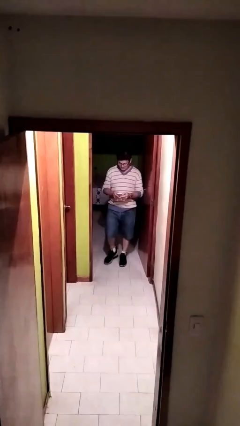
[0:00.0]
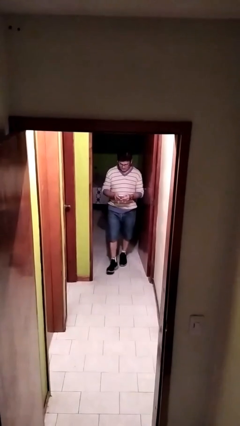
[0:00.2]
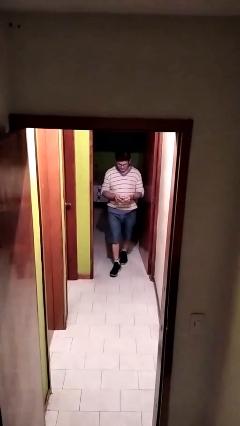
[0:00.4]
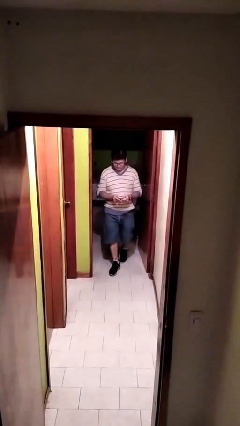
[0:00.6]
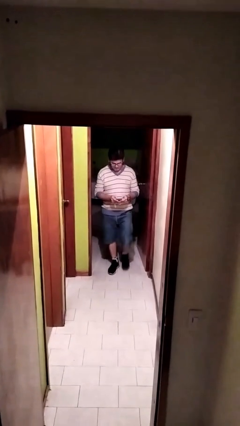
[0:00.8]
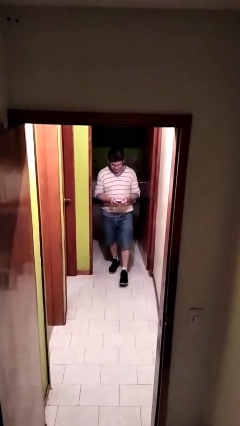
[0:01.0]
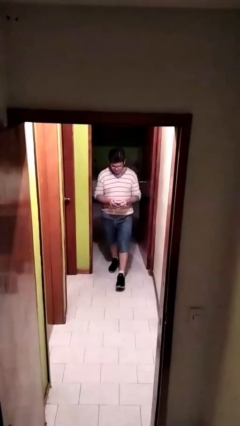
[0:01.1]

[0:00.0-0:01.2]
person enters scene through structure

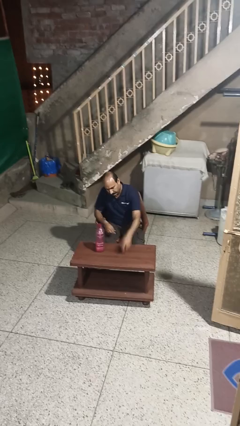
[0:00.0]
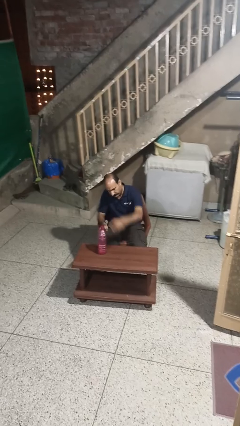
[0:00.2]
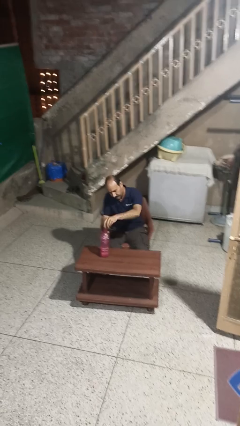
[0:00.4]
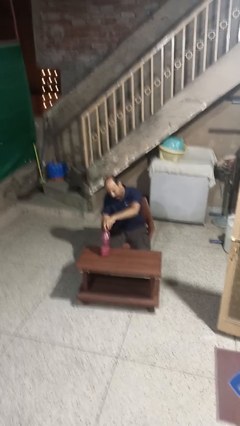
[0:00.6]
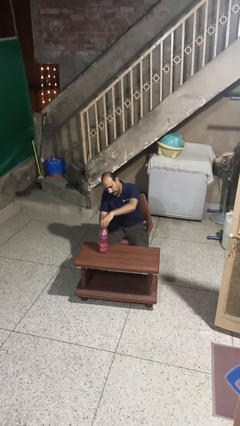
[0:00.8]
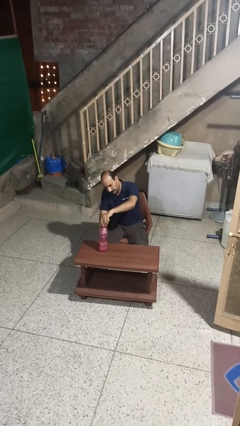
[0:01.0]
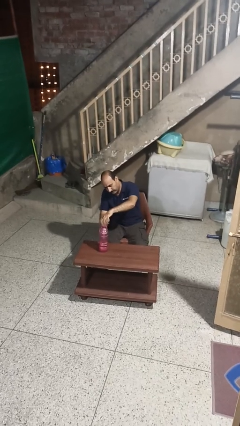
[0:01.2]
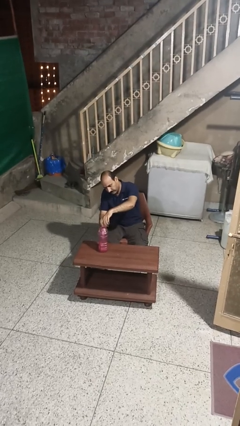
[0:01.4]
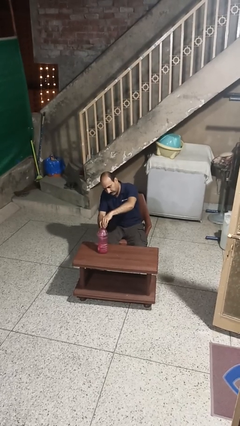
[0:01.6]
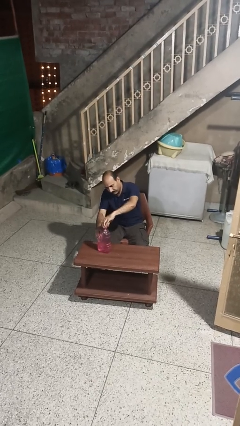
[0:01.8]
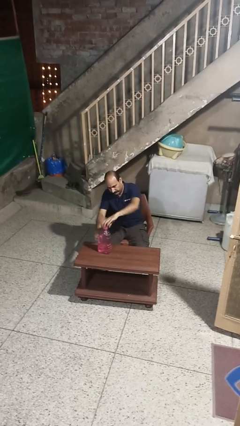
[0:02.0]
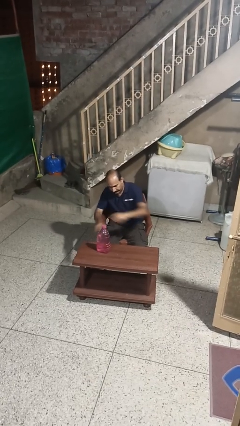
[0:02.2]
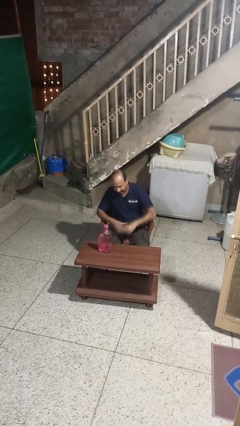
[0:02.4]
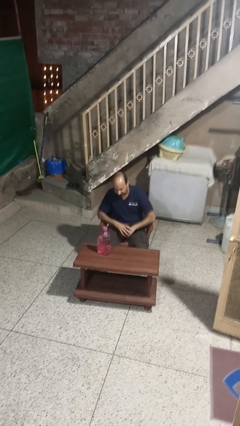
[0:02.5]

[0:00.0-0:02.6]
person screws lid to bottle

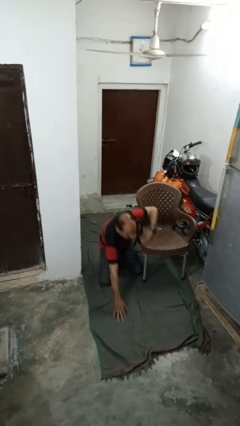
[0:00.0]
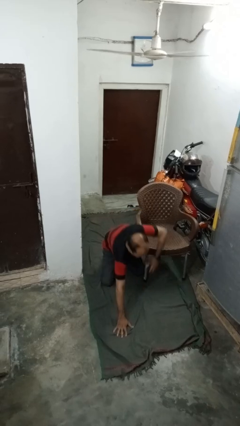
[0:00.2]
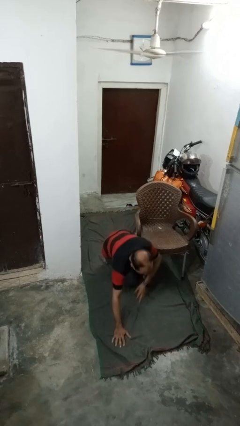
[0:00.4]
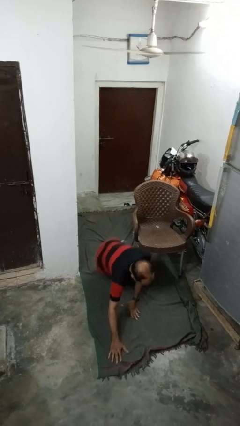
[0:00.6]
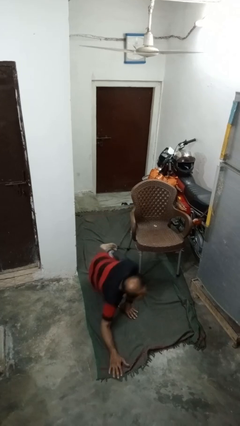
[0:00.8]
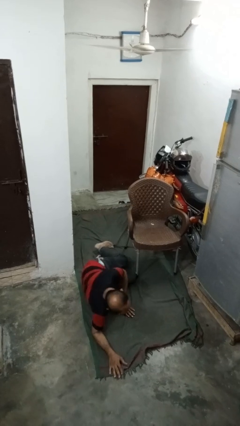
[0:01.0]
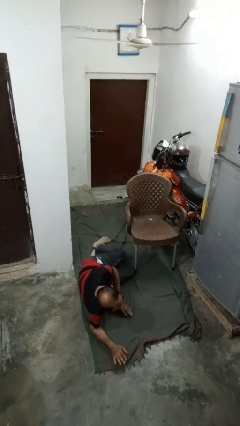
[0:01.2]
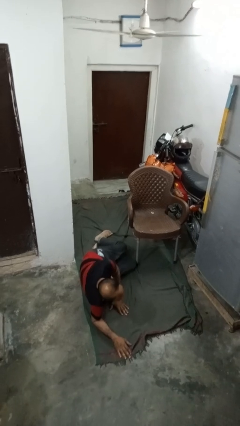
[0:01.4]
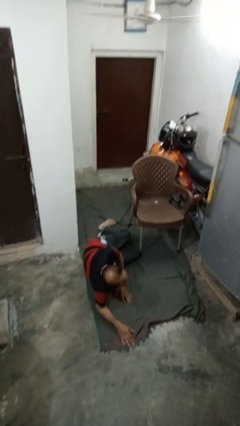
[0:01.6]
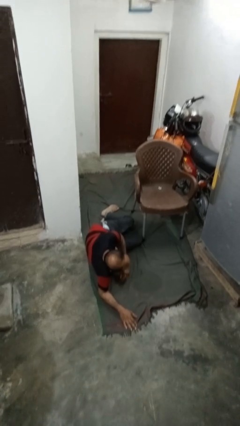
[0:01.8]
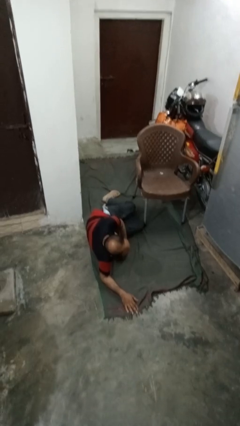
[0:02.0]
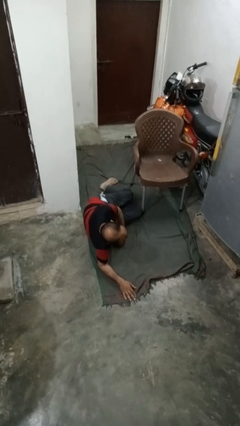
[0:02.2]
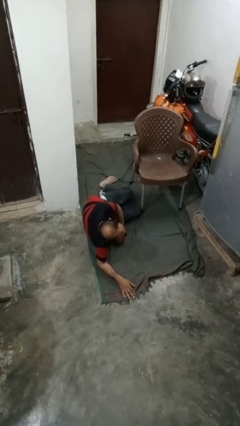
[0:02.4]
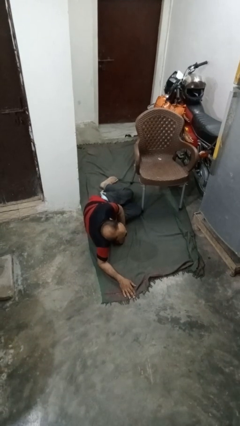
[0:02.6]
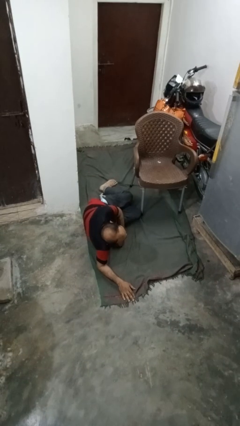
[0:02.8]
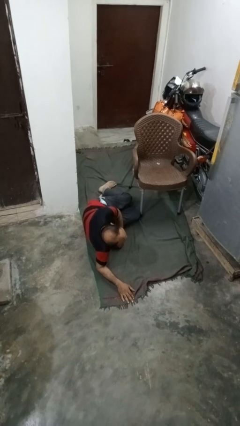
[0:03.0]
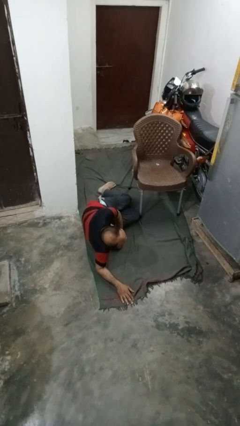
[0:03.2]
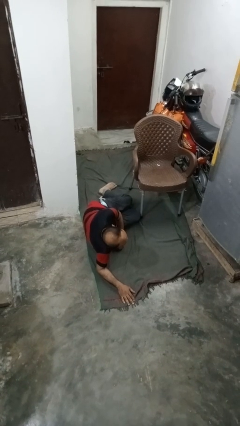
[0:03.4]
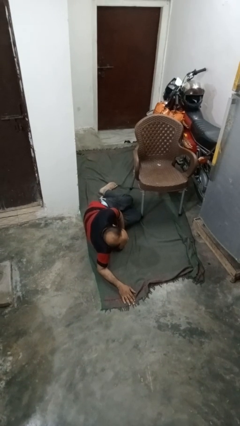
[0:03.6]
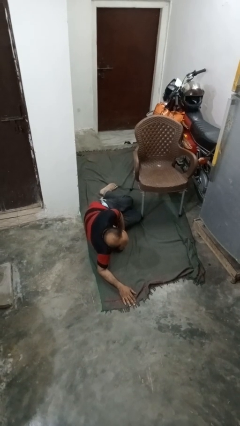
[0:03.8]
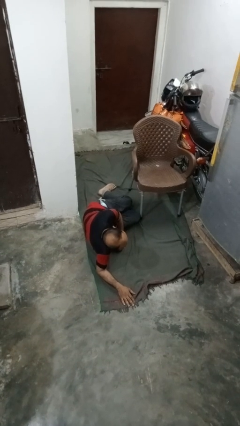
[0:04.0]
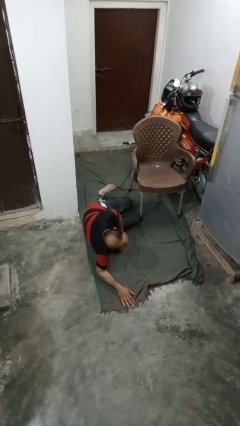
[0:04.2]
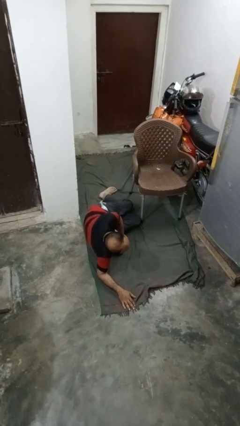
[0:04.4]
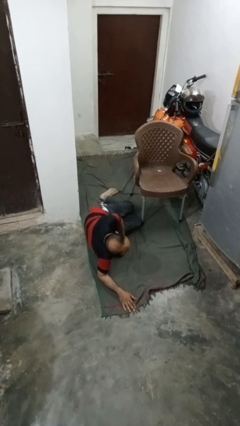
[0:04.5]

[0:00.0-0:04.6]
person lies down on floor

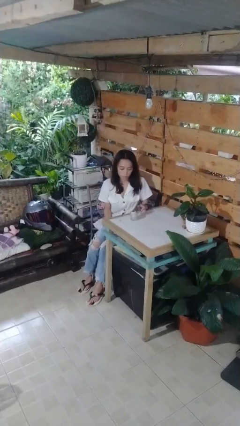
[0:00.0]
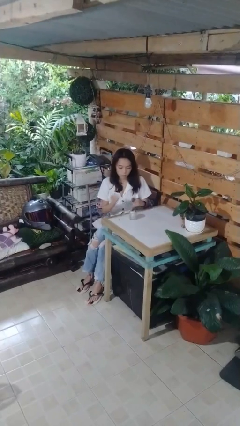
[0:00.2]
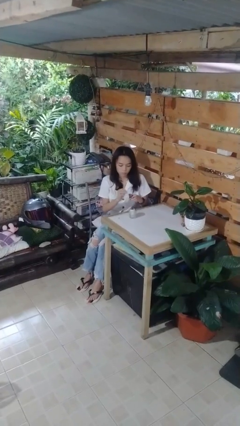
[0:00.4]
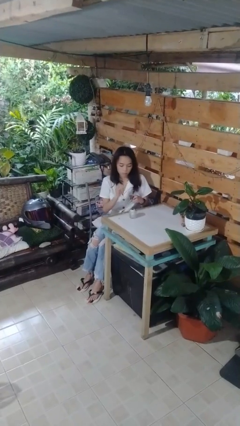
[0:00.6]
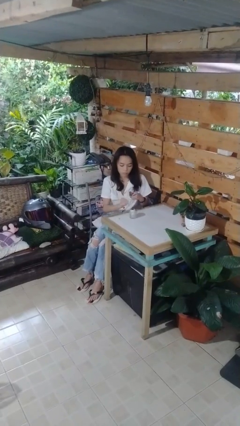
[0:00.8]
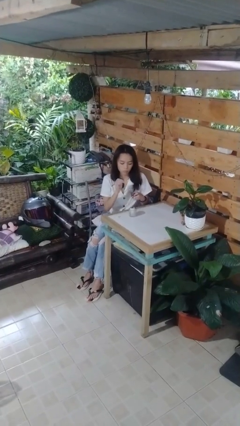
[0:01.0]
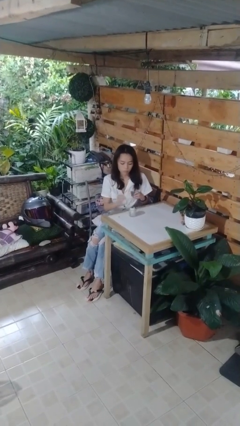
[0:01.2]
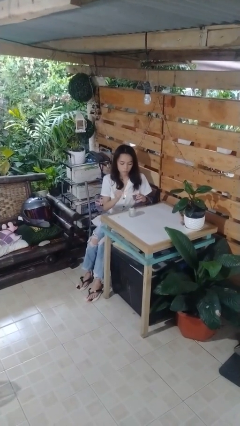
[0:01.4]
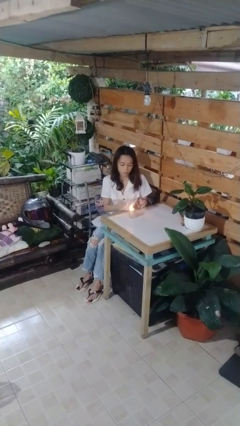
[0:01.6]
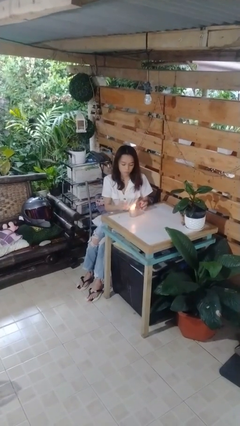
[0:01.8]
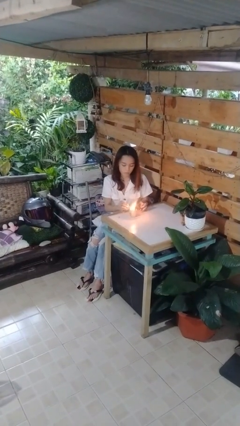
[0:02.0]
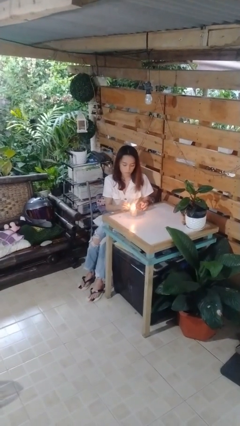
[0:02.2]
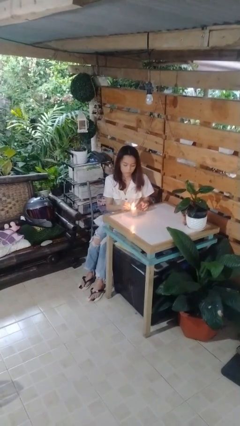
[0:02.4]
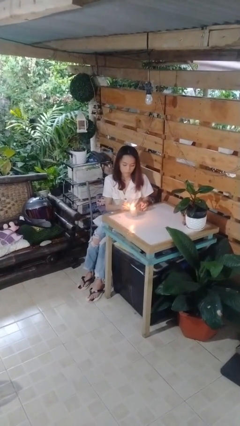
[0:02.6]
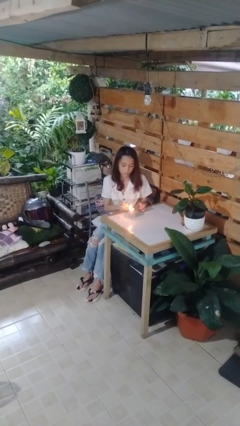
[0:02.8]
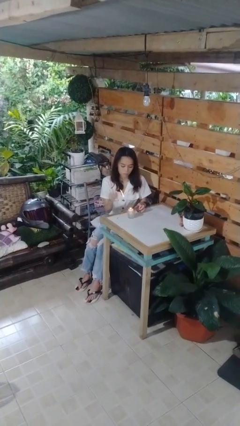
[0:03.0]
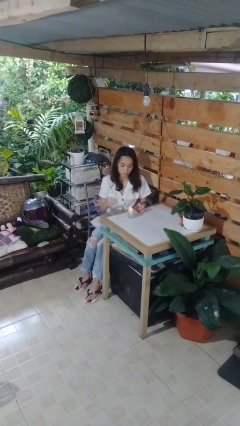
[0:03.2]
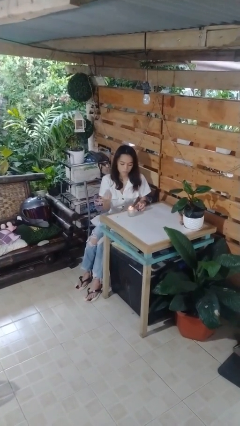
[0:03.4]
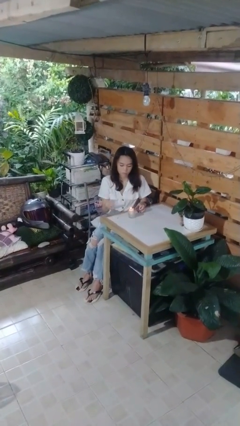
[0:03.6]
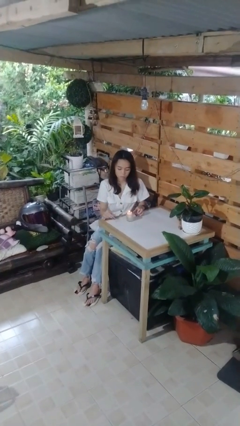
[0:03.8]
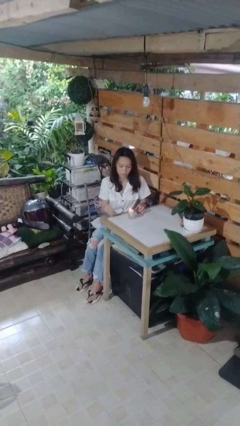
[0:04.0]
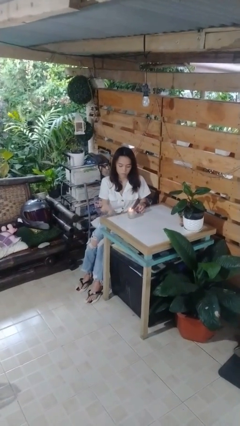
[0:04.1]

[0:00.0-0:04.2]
person lights candle

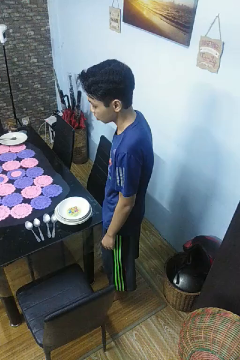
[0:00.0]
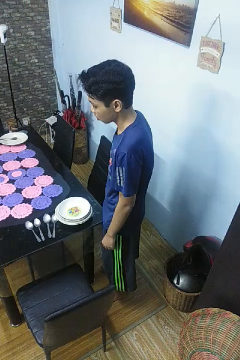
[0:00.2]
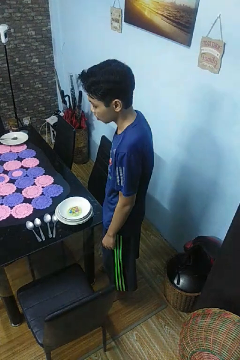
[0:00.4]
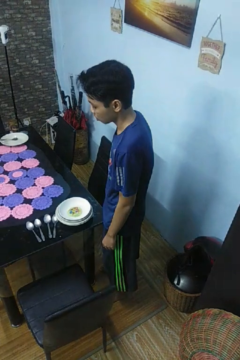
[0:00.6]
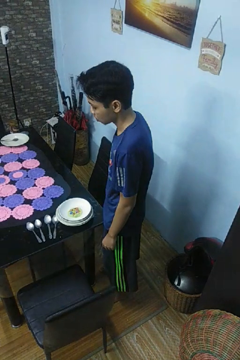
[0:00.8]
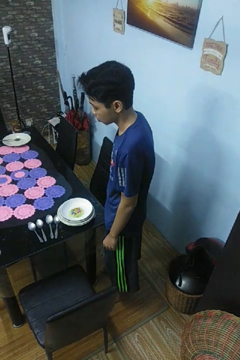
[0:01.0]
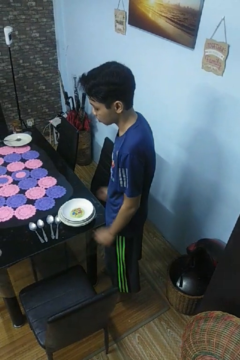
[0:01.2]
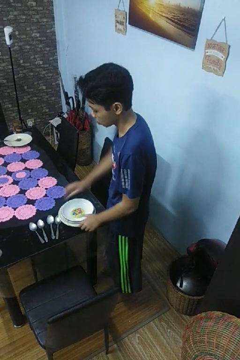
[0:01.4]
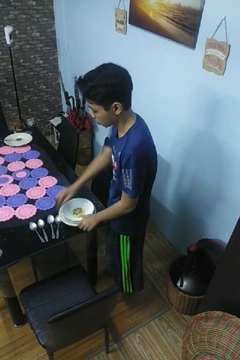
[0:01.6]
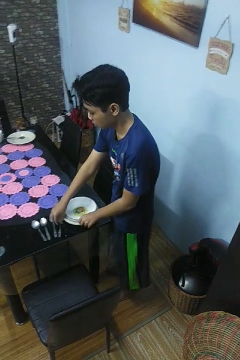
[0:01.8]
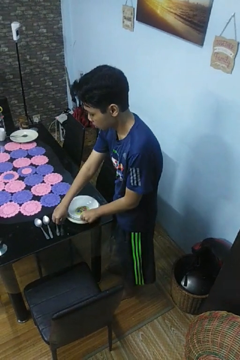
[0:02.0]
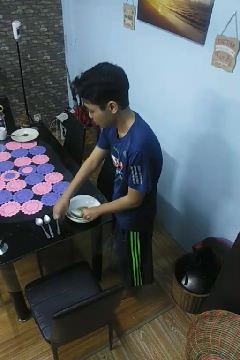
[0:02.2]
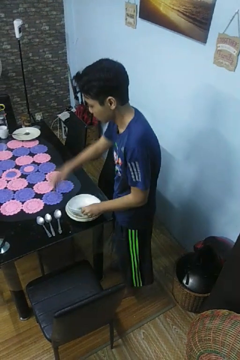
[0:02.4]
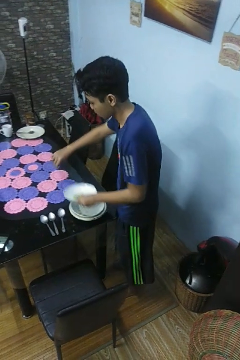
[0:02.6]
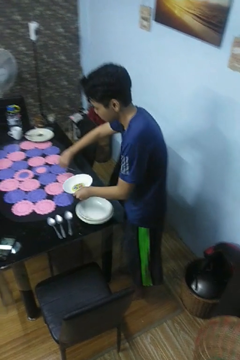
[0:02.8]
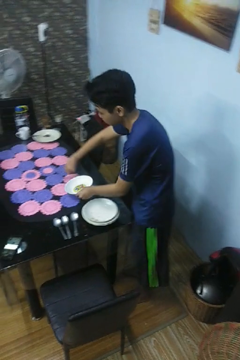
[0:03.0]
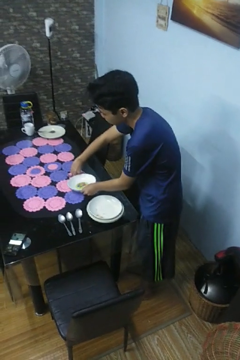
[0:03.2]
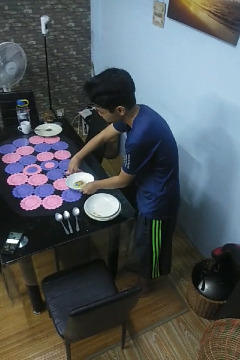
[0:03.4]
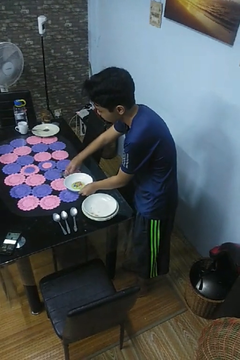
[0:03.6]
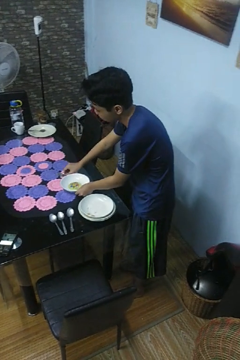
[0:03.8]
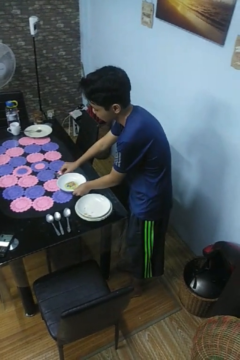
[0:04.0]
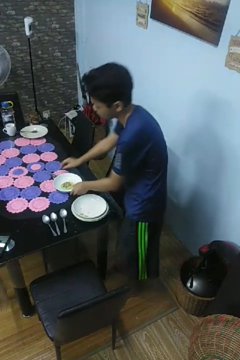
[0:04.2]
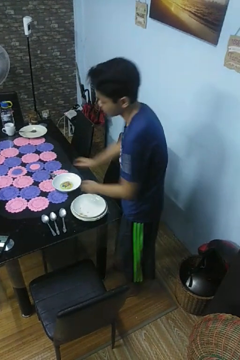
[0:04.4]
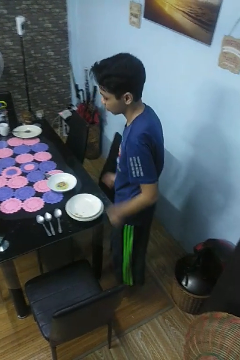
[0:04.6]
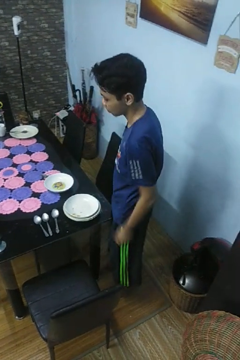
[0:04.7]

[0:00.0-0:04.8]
person sets table

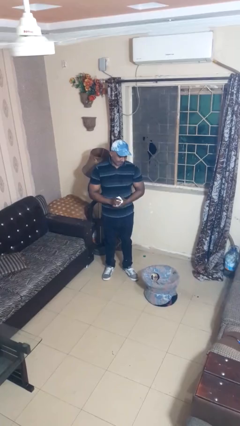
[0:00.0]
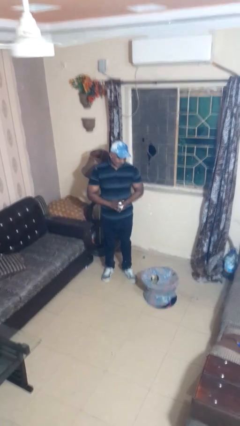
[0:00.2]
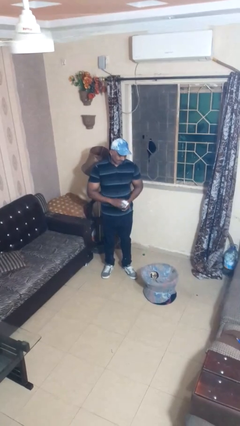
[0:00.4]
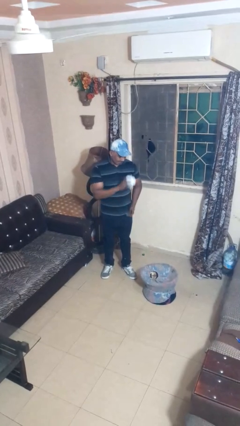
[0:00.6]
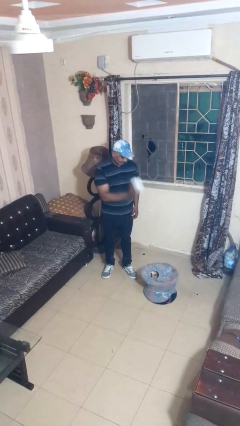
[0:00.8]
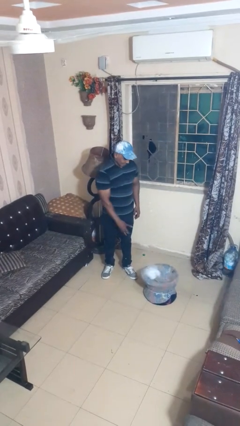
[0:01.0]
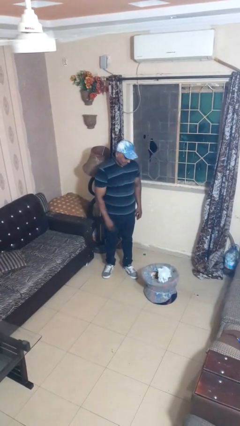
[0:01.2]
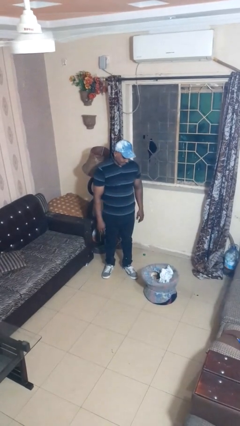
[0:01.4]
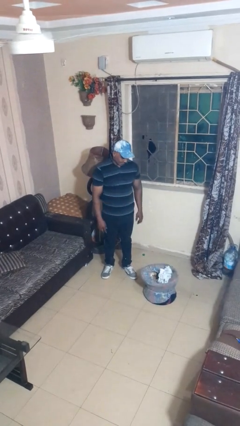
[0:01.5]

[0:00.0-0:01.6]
person puts object into basket
